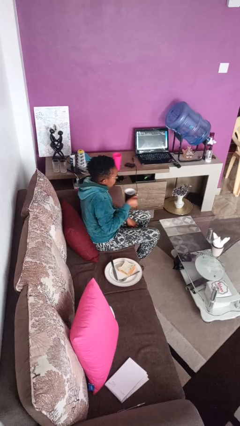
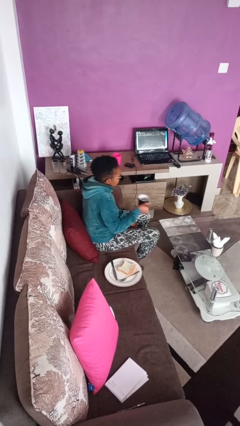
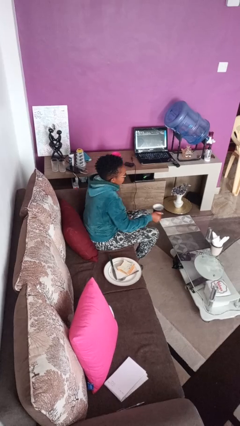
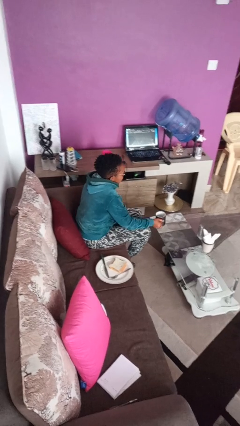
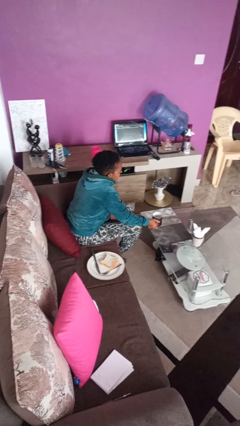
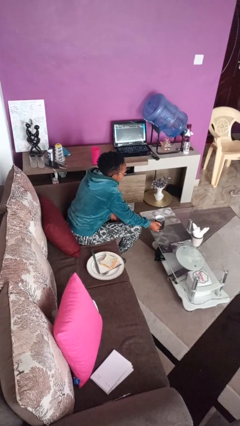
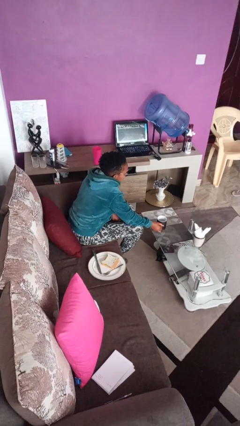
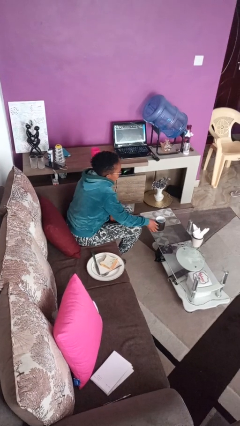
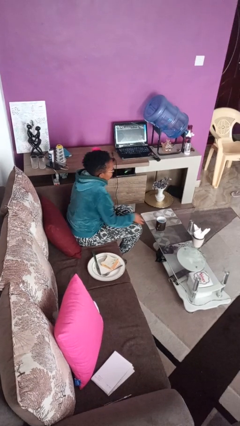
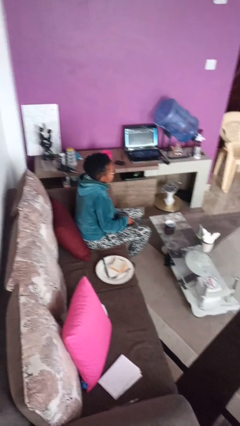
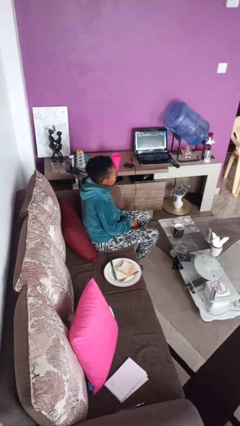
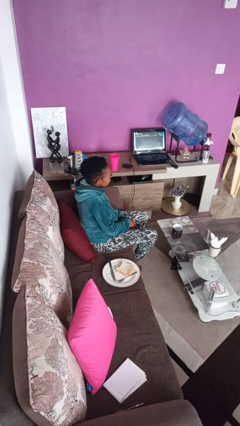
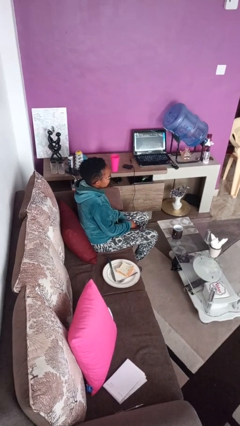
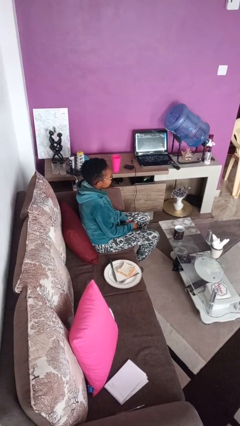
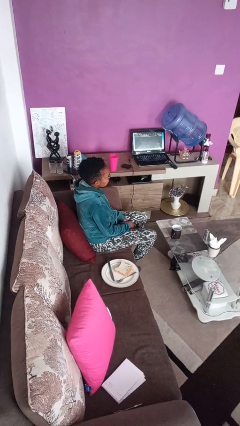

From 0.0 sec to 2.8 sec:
person puts down object on table

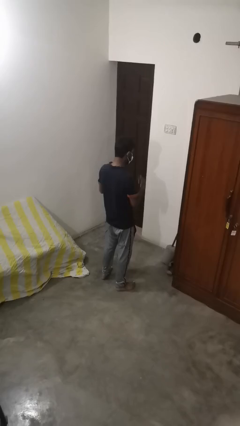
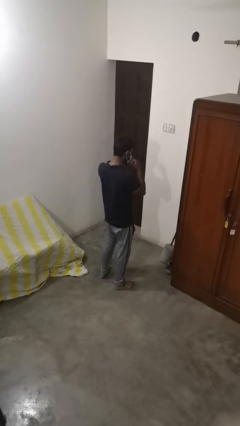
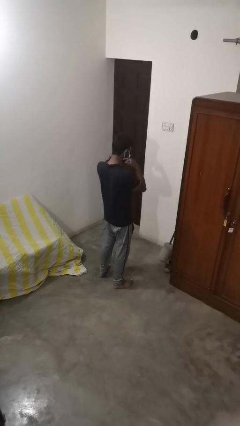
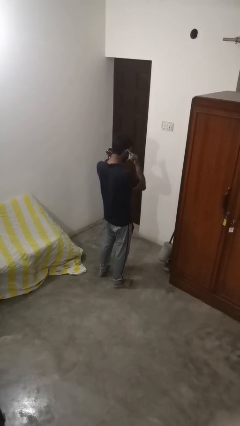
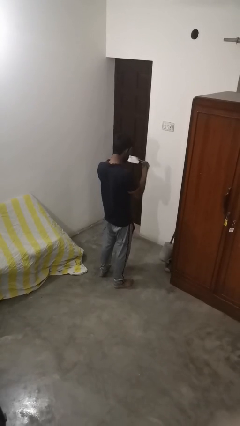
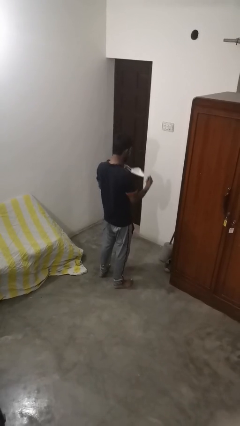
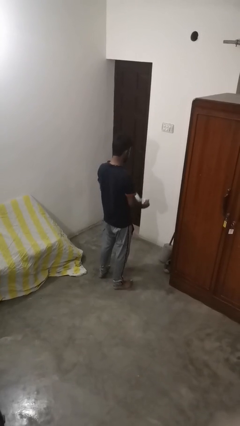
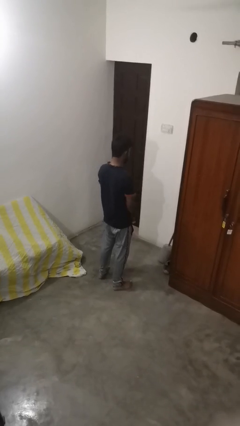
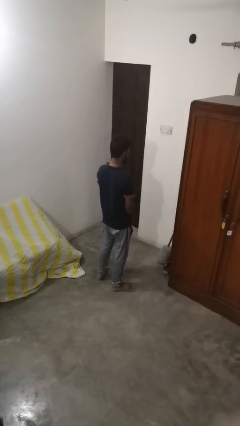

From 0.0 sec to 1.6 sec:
person takes off facemask

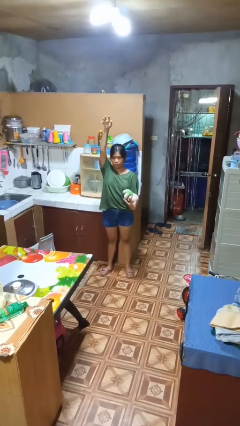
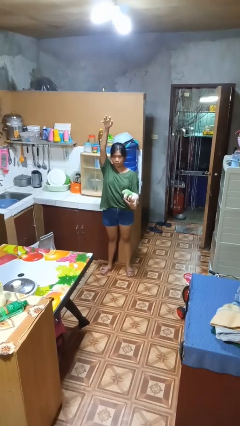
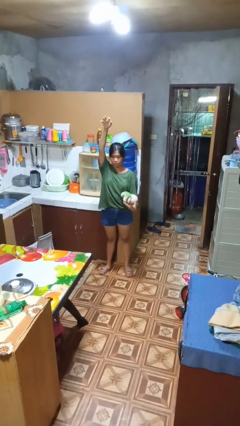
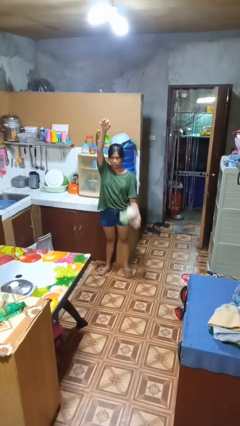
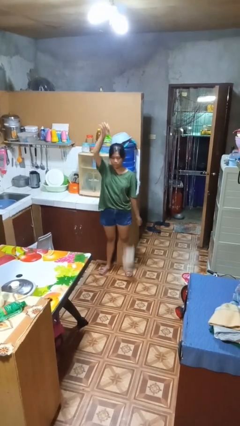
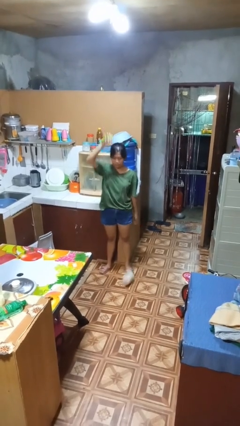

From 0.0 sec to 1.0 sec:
person catches dropped object

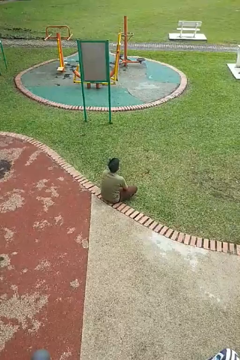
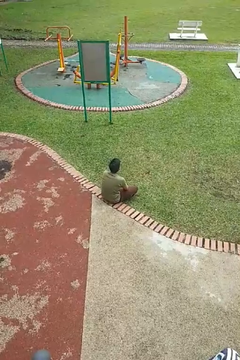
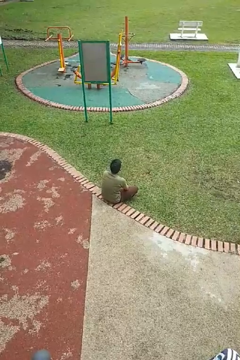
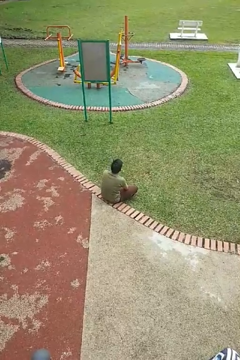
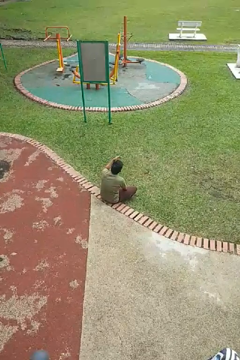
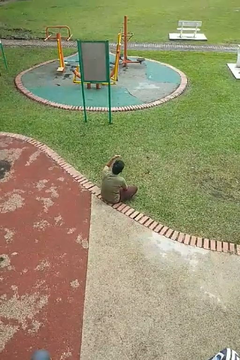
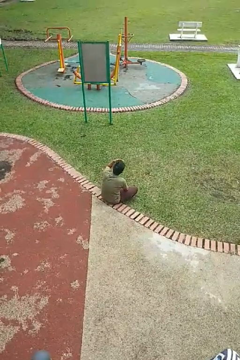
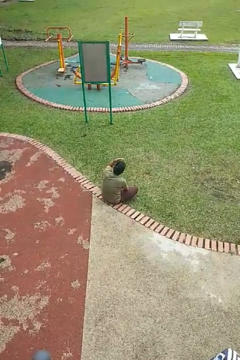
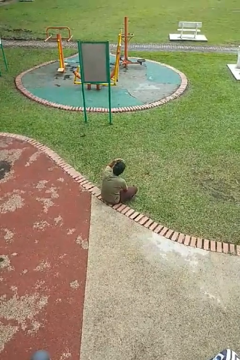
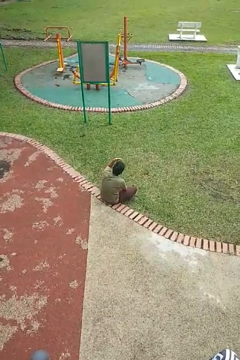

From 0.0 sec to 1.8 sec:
person shades eyes

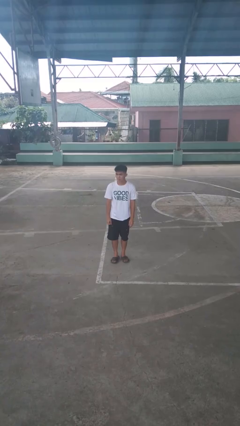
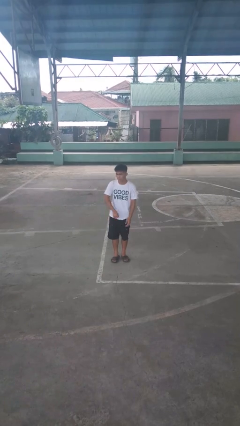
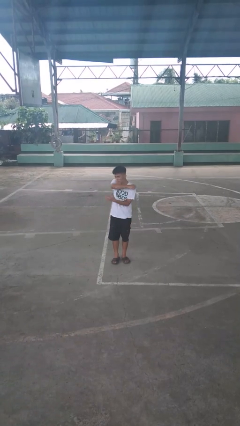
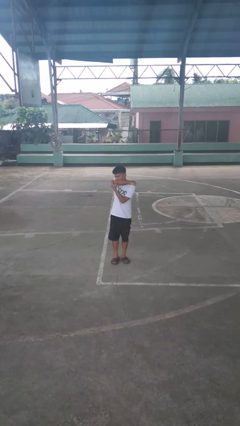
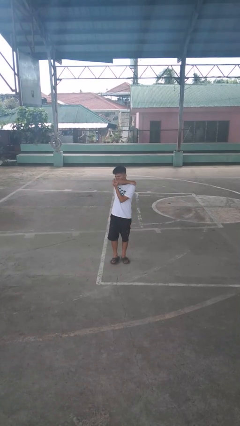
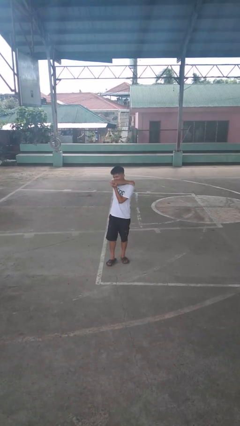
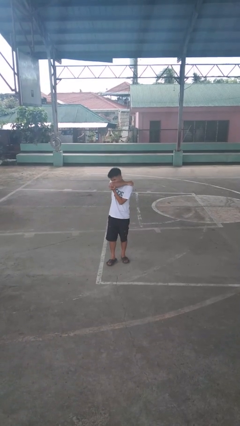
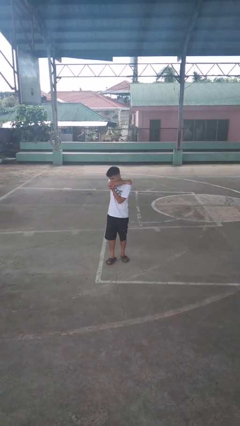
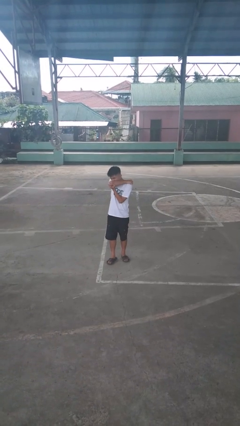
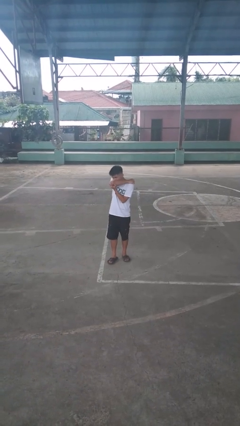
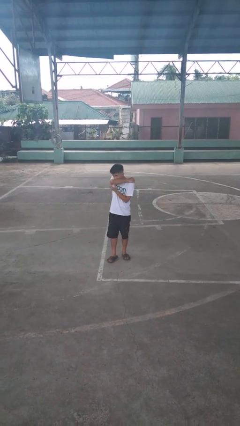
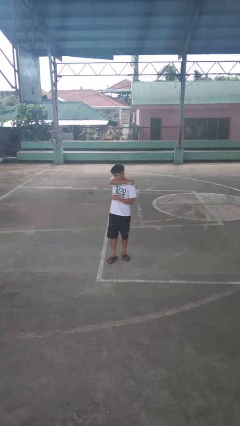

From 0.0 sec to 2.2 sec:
person sneezes into arm

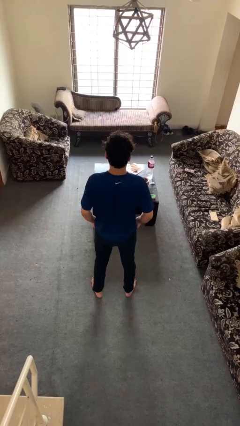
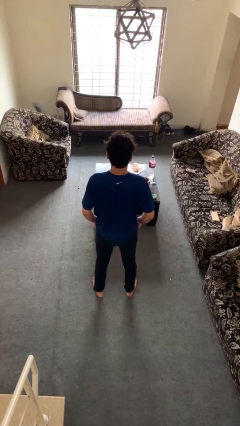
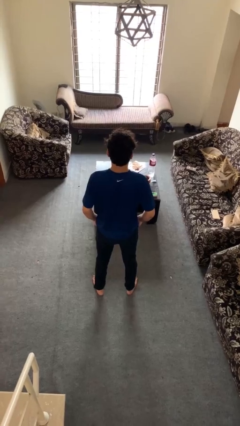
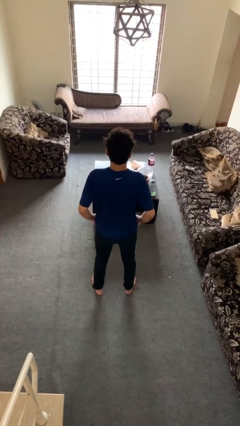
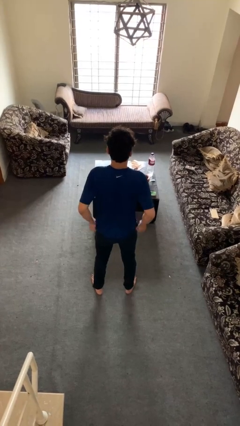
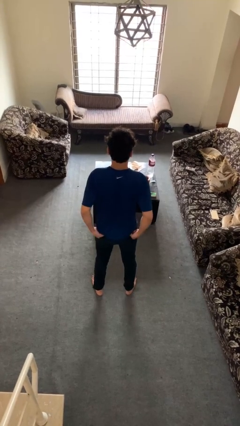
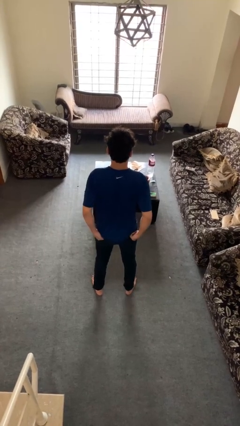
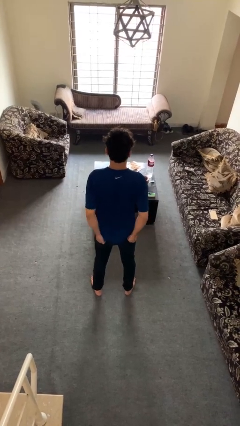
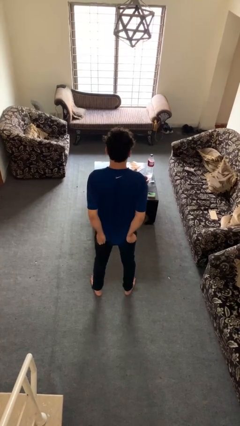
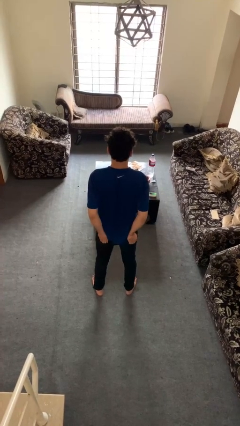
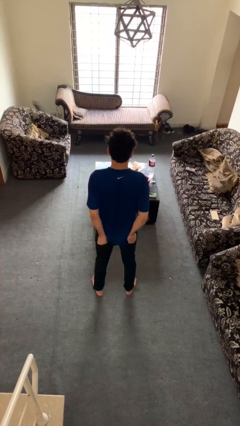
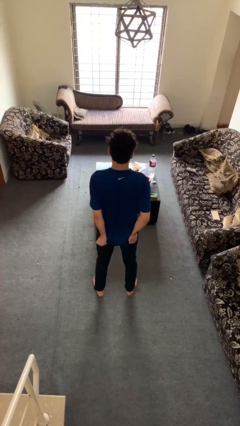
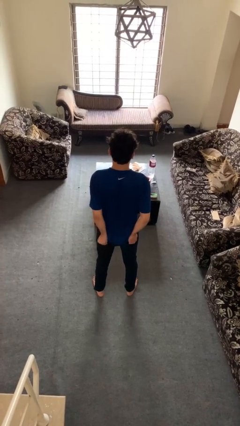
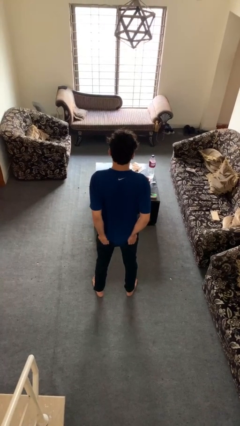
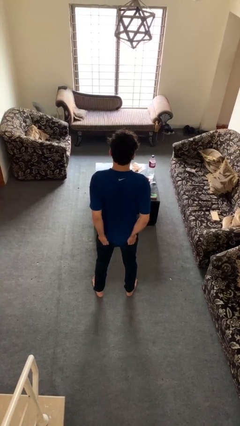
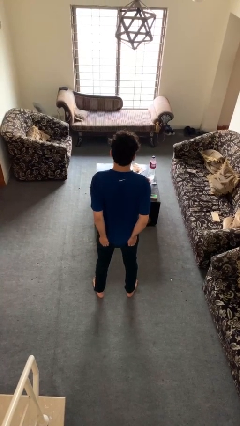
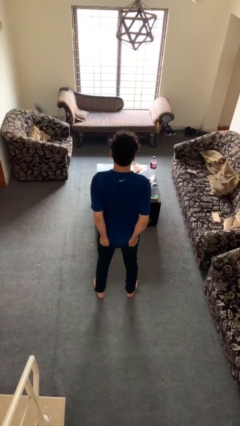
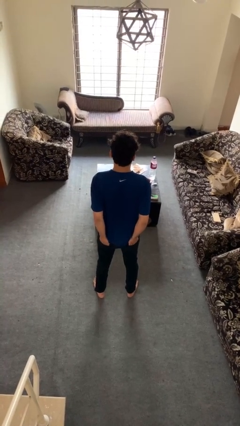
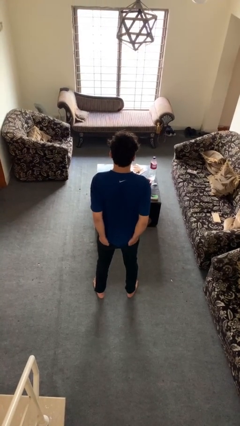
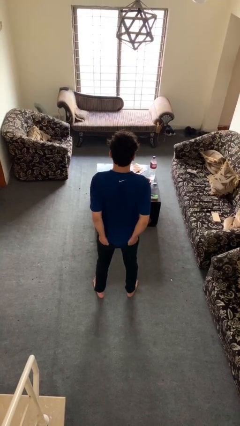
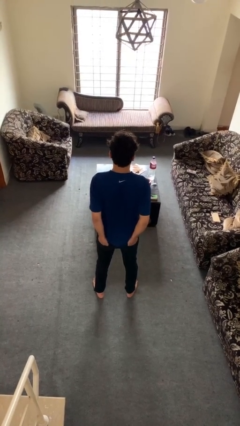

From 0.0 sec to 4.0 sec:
person puts hands in back pockets

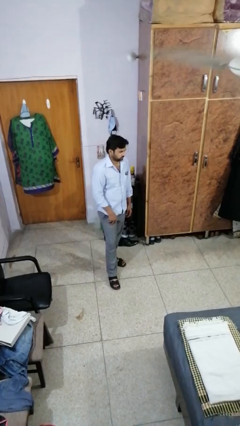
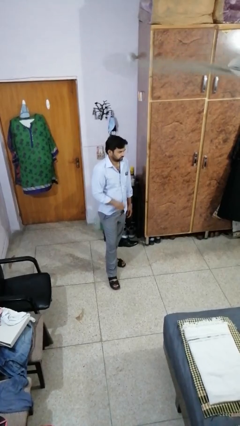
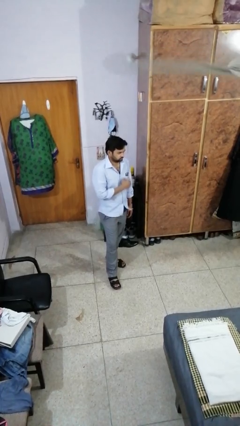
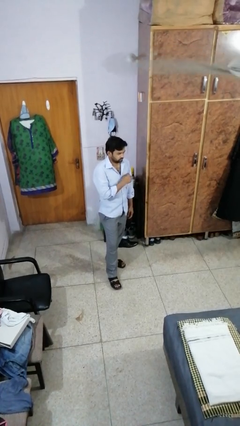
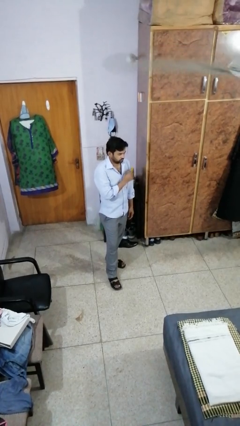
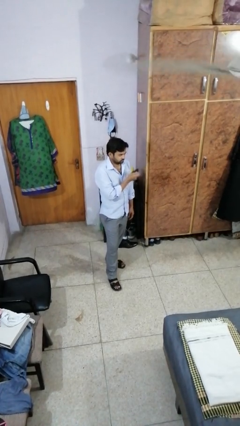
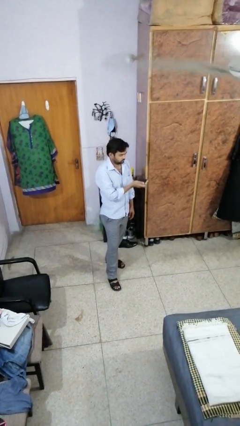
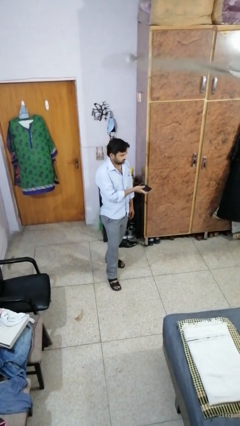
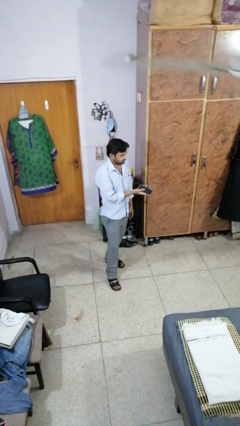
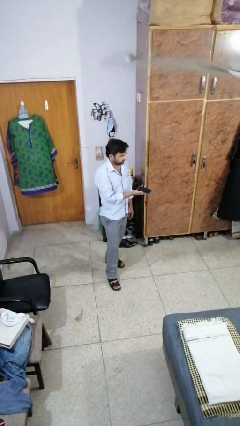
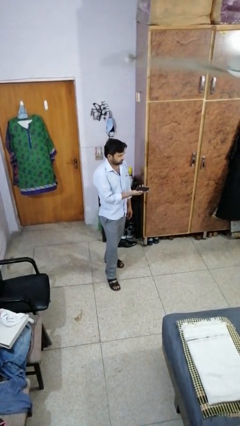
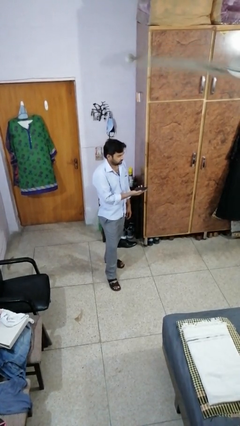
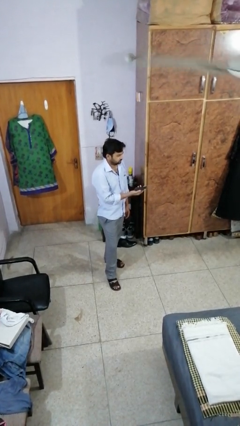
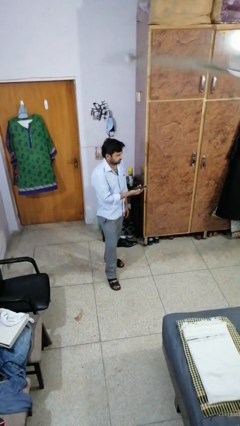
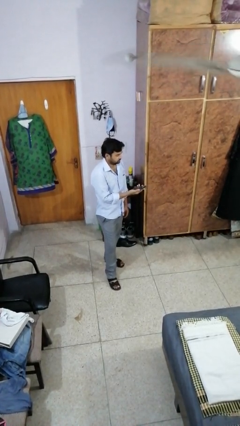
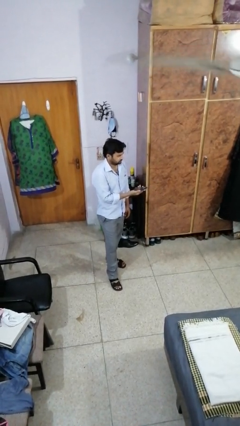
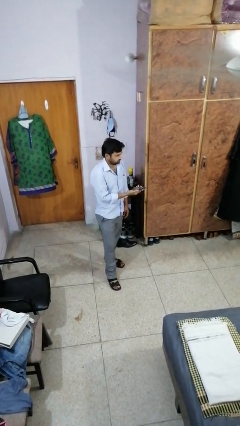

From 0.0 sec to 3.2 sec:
person takes phone from pocket

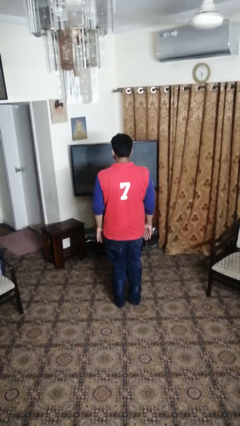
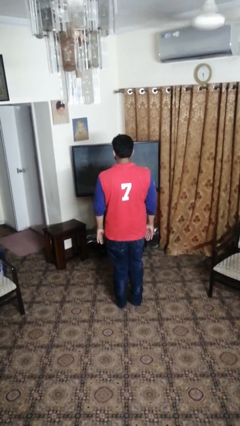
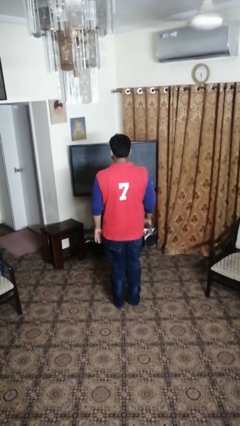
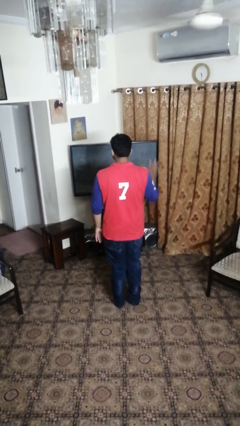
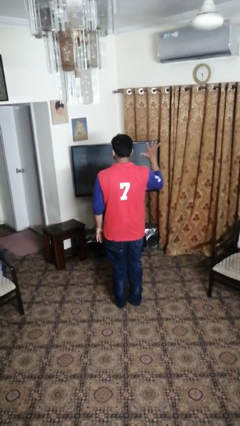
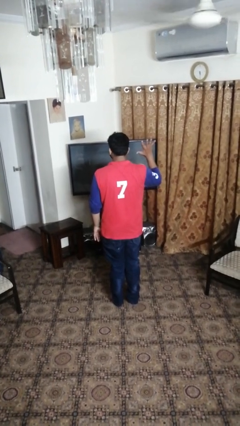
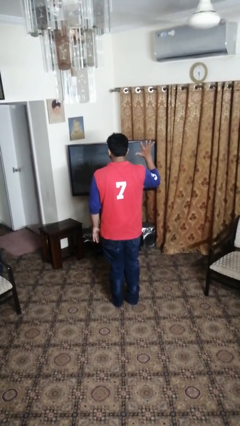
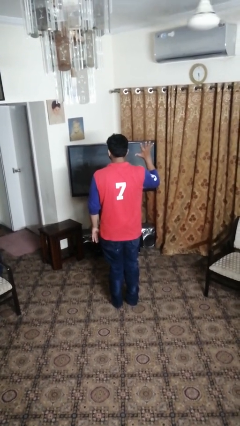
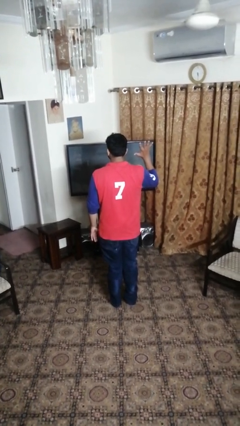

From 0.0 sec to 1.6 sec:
person gestures number five
